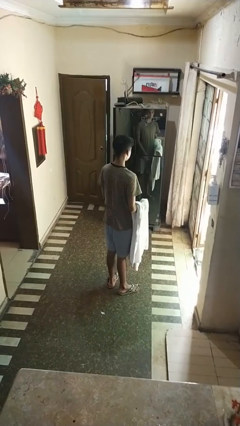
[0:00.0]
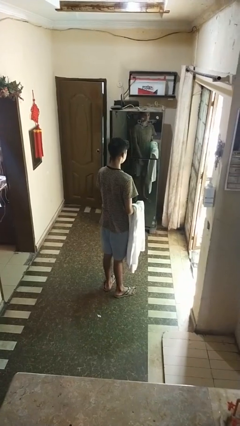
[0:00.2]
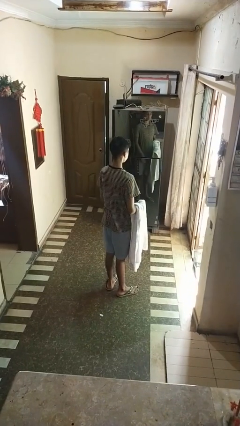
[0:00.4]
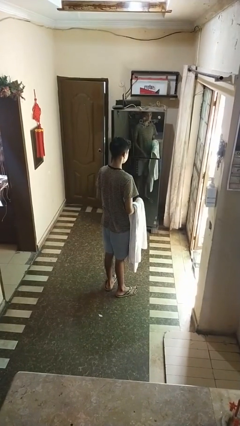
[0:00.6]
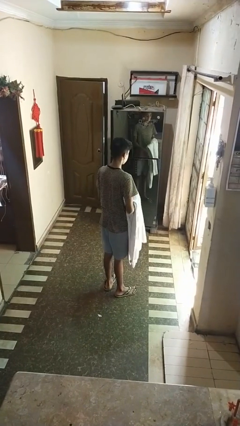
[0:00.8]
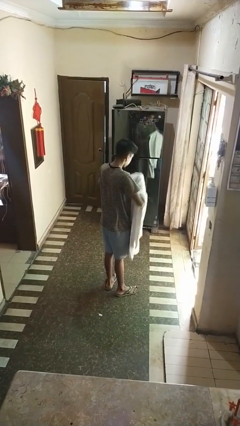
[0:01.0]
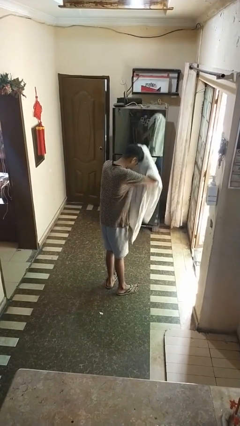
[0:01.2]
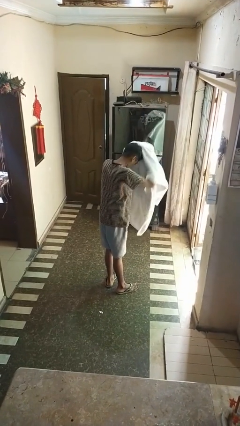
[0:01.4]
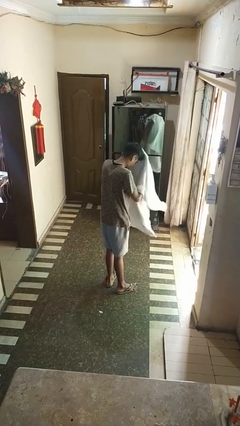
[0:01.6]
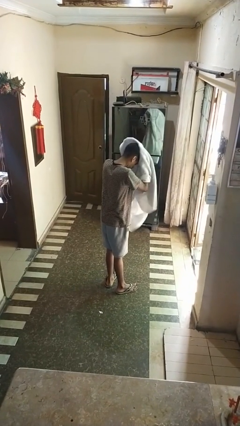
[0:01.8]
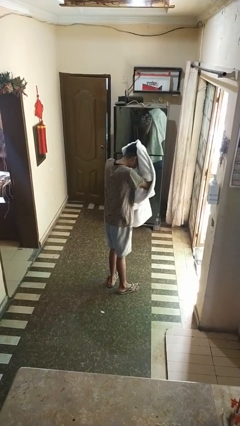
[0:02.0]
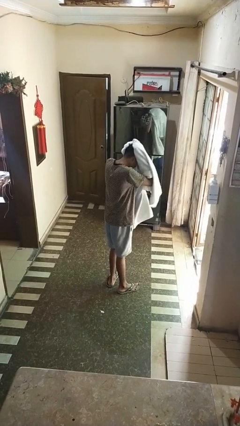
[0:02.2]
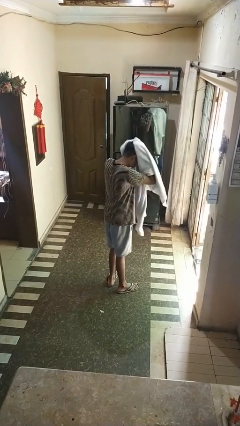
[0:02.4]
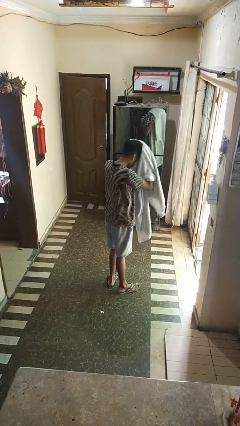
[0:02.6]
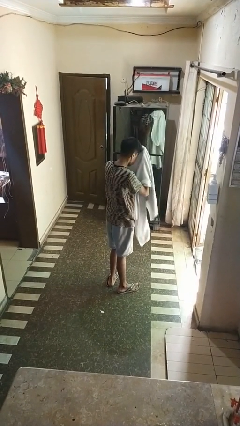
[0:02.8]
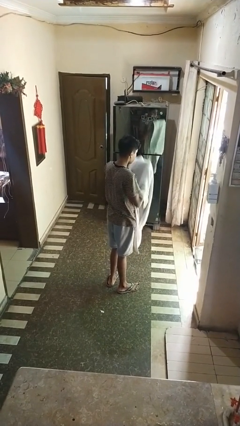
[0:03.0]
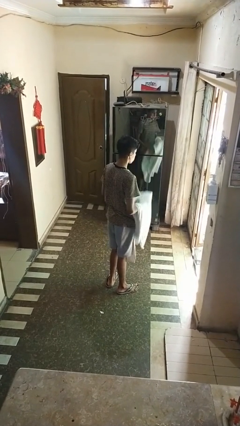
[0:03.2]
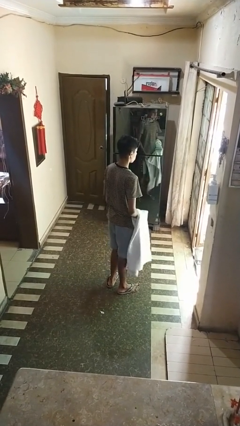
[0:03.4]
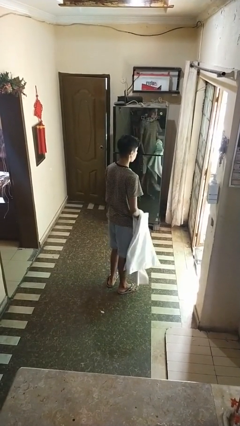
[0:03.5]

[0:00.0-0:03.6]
person dries hair with towel

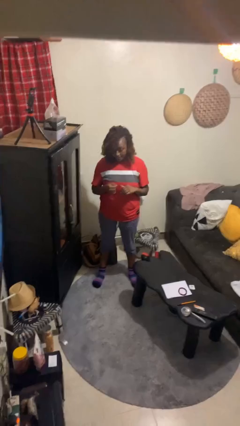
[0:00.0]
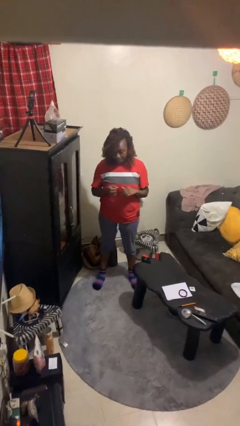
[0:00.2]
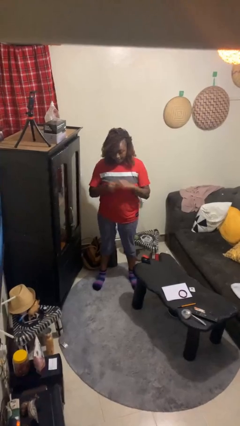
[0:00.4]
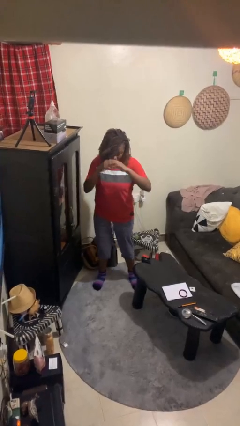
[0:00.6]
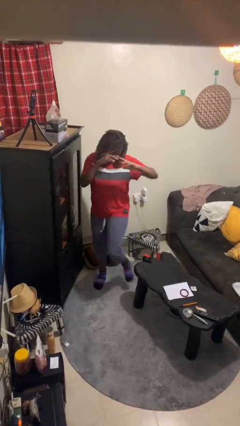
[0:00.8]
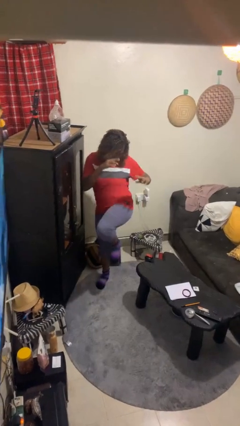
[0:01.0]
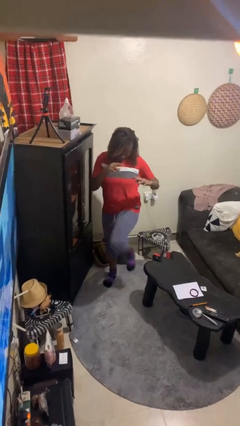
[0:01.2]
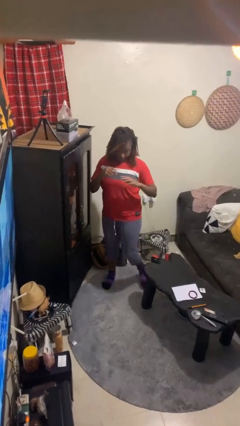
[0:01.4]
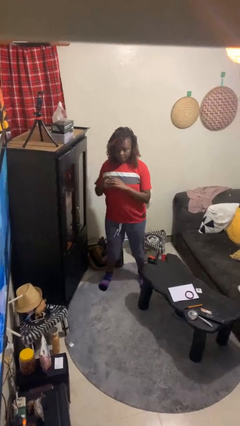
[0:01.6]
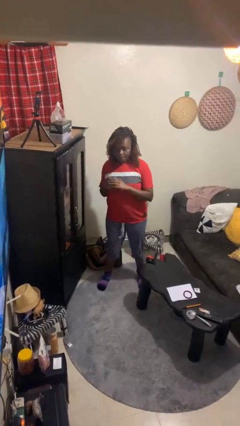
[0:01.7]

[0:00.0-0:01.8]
person karate kicks

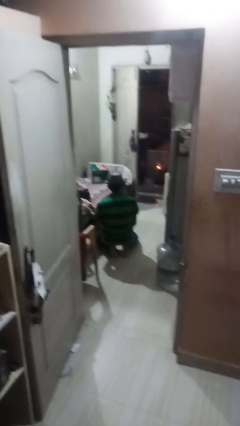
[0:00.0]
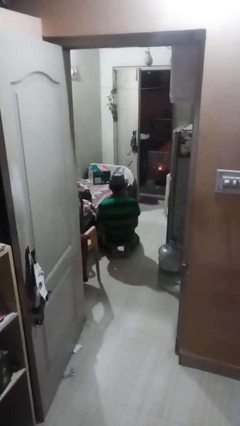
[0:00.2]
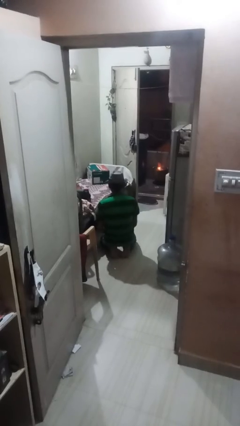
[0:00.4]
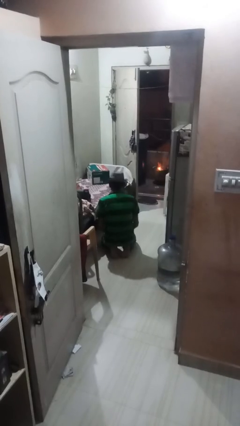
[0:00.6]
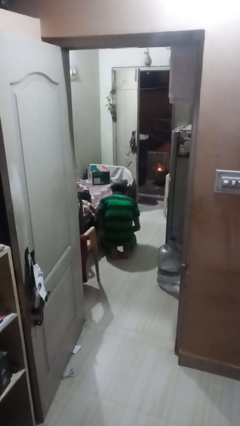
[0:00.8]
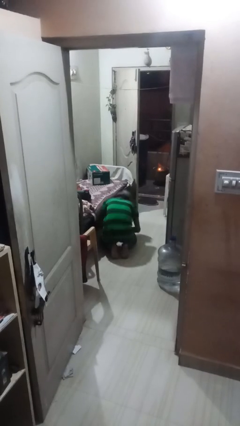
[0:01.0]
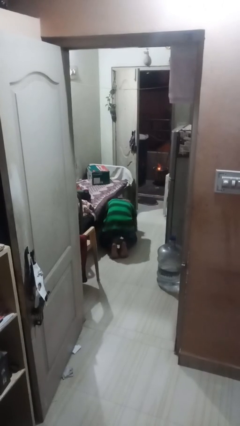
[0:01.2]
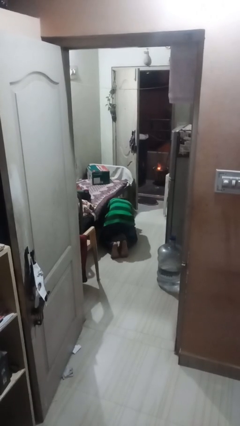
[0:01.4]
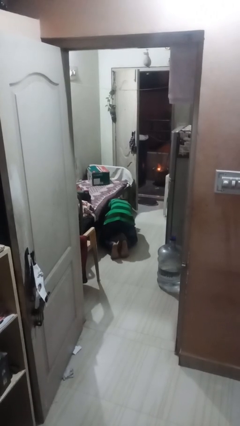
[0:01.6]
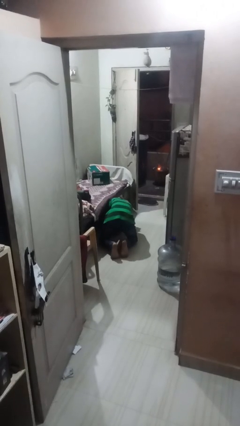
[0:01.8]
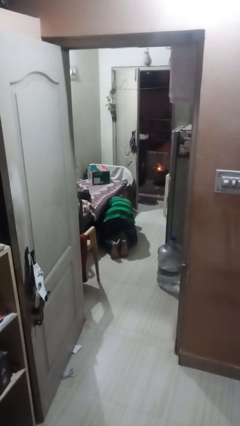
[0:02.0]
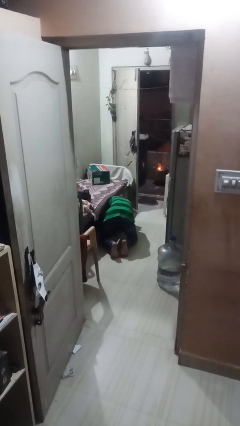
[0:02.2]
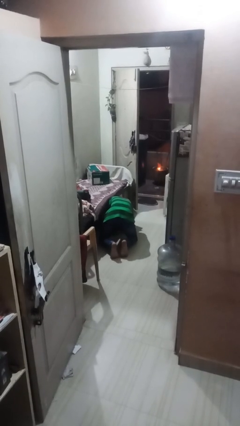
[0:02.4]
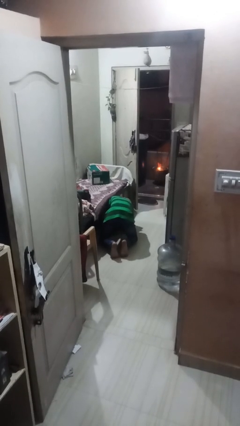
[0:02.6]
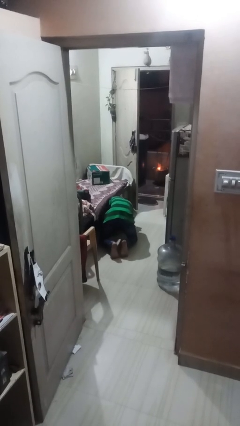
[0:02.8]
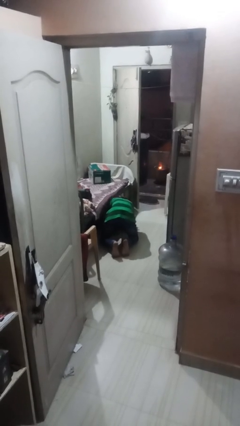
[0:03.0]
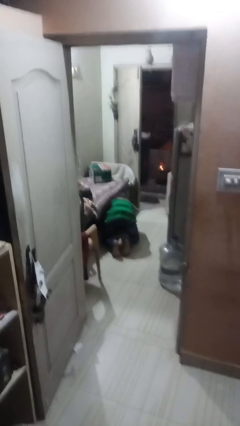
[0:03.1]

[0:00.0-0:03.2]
person searches under bed

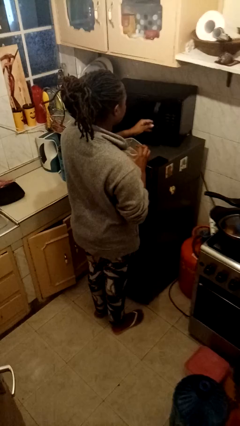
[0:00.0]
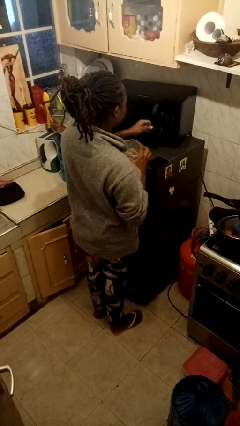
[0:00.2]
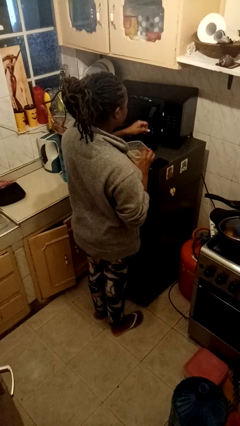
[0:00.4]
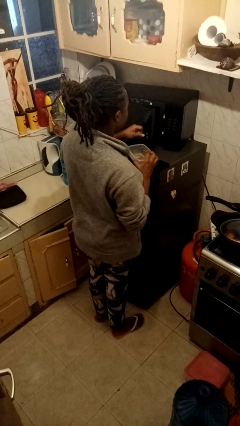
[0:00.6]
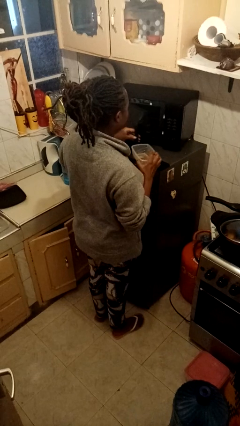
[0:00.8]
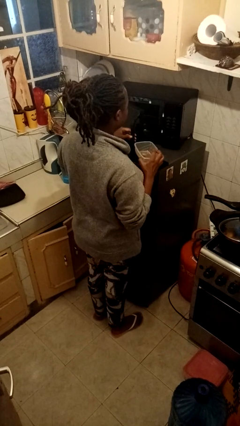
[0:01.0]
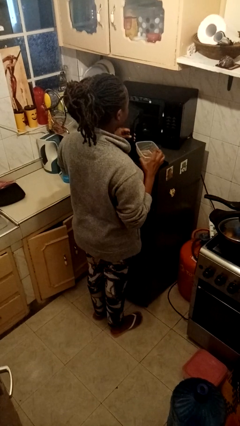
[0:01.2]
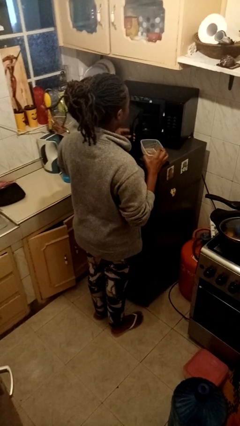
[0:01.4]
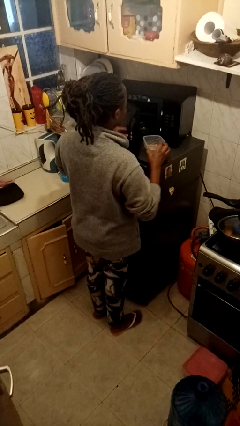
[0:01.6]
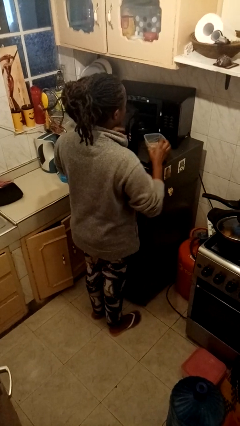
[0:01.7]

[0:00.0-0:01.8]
person opens microwave

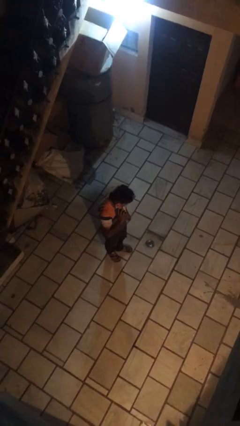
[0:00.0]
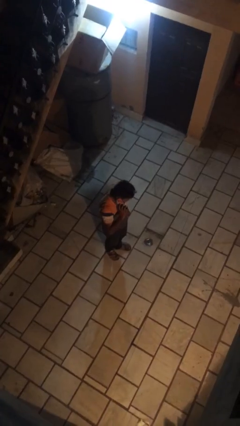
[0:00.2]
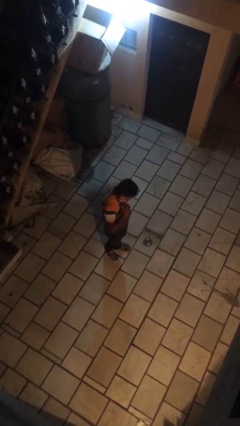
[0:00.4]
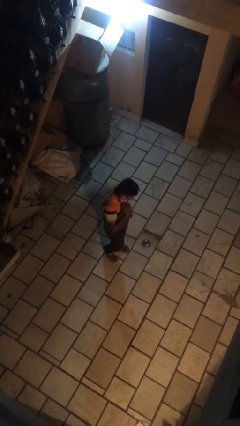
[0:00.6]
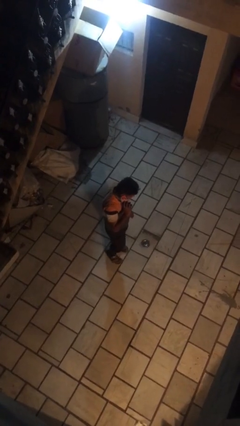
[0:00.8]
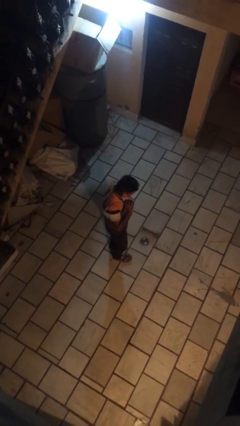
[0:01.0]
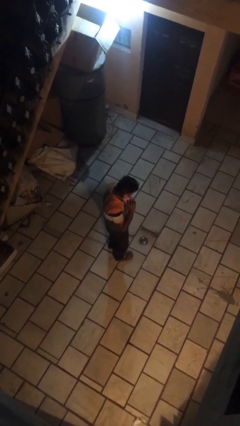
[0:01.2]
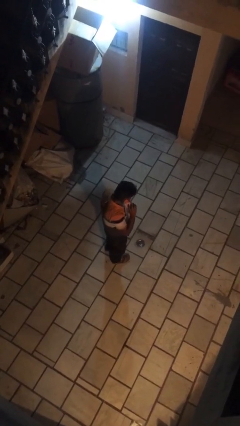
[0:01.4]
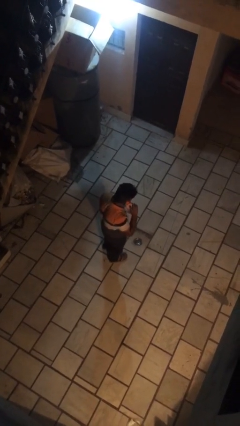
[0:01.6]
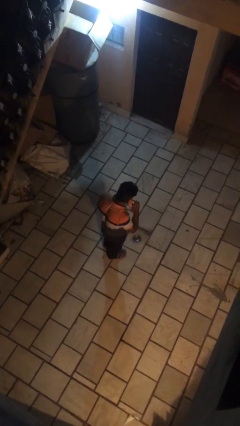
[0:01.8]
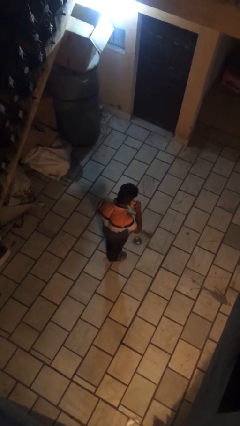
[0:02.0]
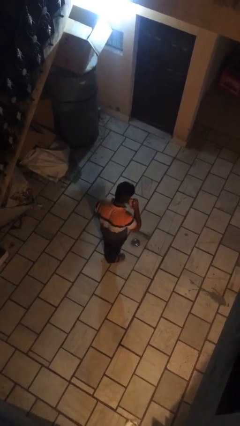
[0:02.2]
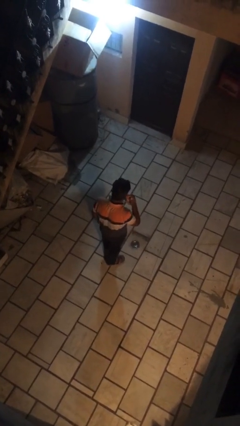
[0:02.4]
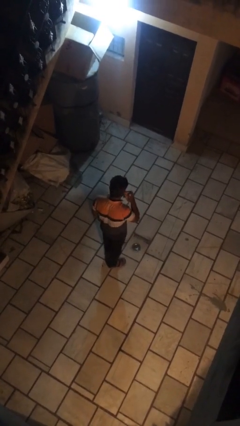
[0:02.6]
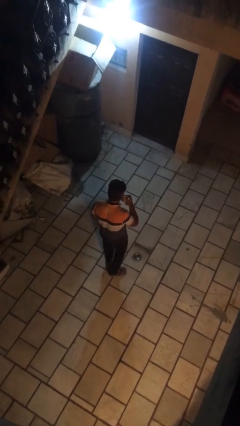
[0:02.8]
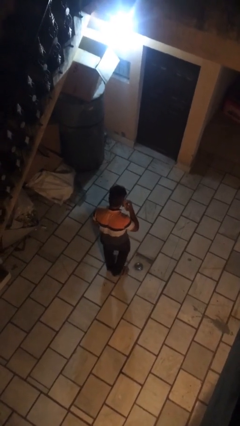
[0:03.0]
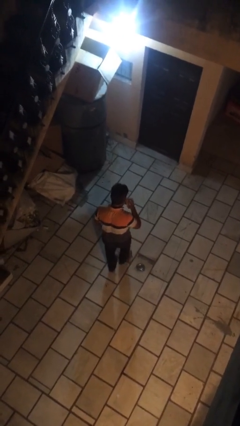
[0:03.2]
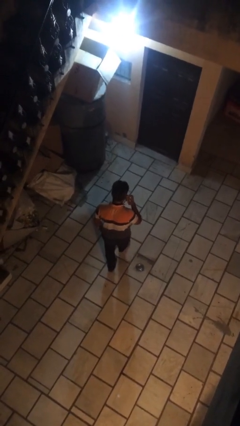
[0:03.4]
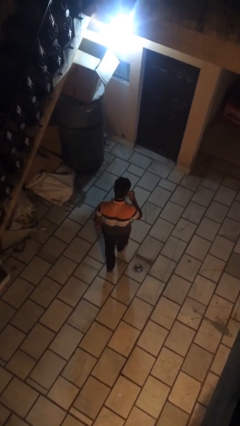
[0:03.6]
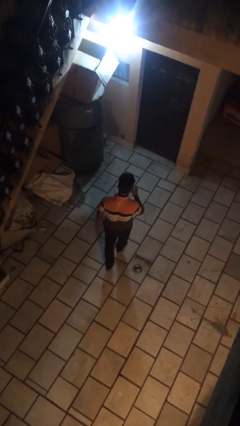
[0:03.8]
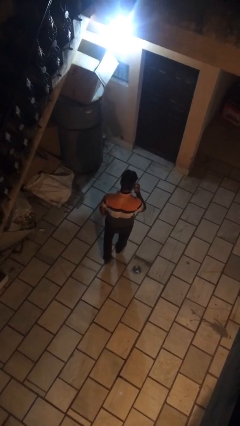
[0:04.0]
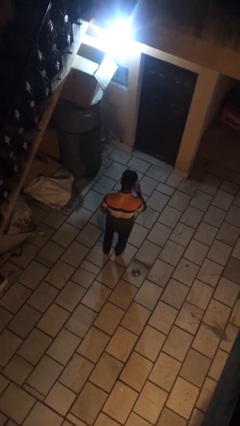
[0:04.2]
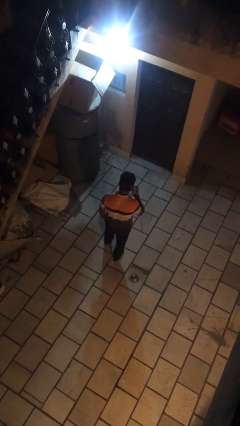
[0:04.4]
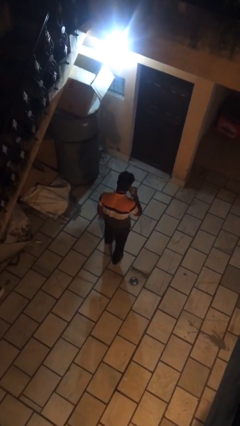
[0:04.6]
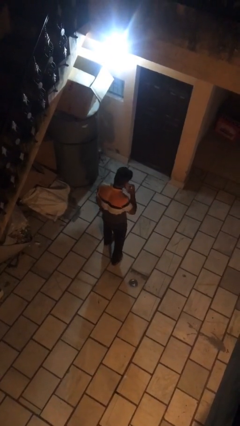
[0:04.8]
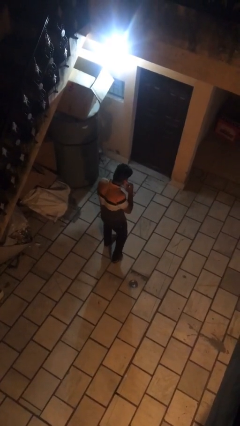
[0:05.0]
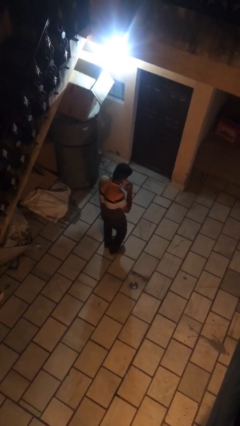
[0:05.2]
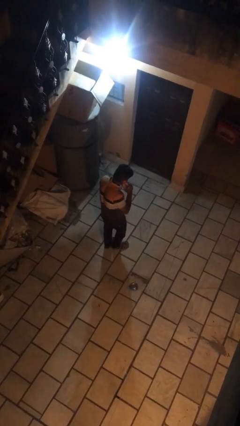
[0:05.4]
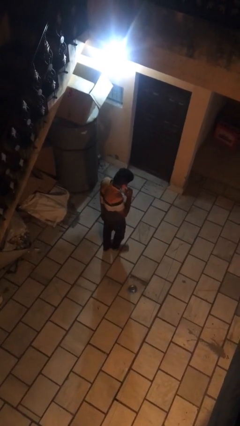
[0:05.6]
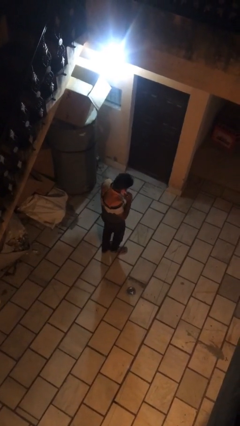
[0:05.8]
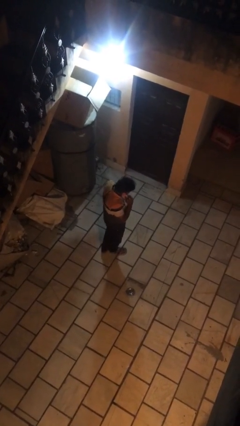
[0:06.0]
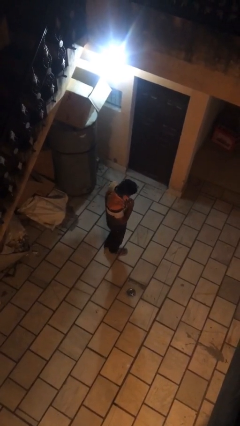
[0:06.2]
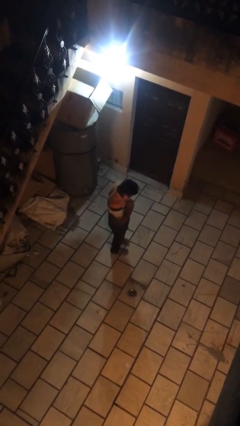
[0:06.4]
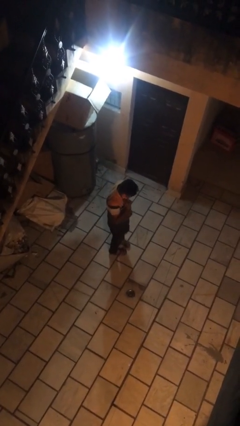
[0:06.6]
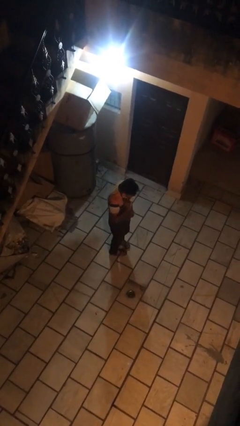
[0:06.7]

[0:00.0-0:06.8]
person talks on phone
